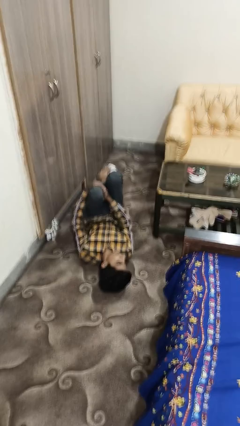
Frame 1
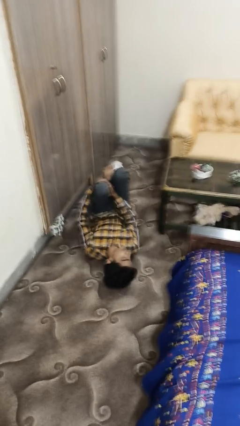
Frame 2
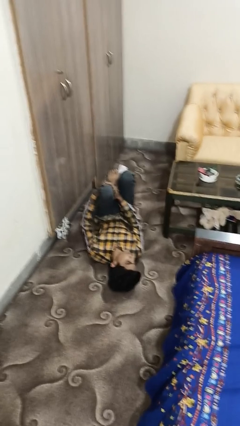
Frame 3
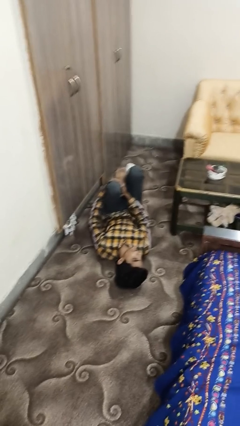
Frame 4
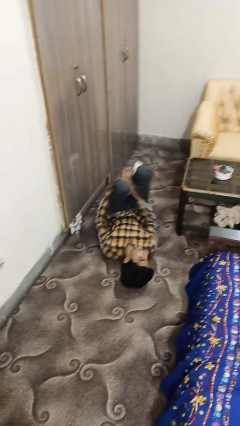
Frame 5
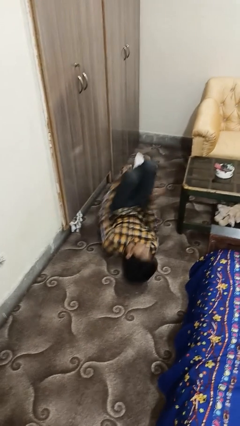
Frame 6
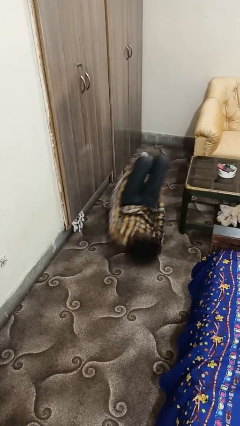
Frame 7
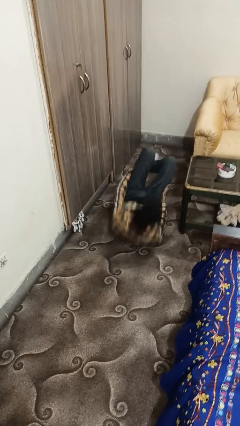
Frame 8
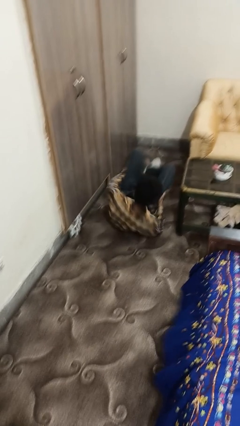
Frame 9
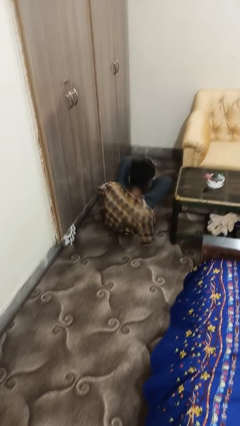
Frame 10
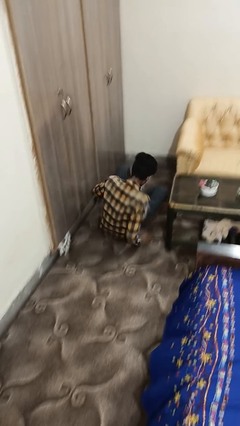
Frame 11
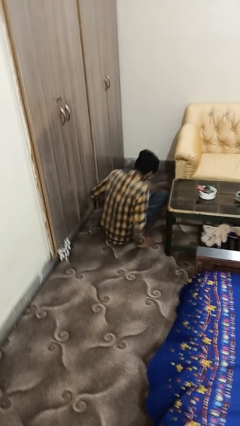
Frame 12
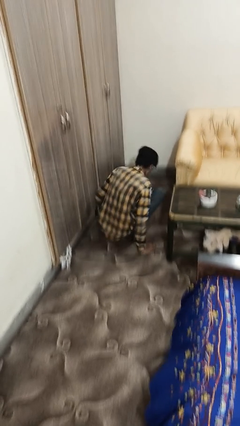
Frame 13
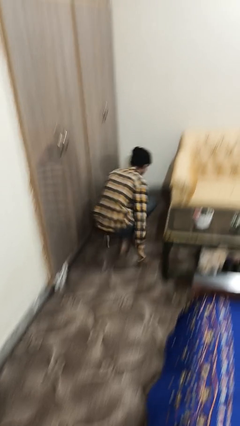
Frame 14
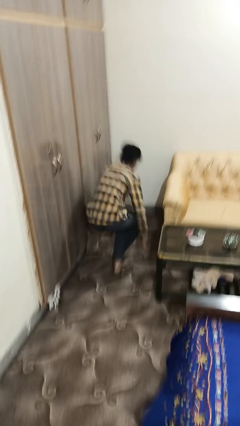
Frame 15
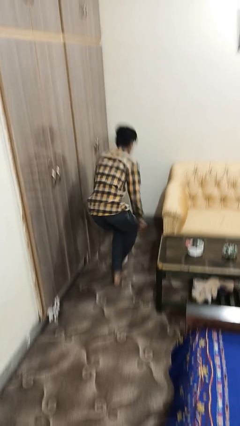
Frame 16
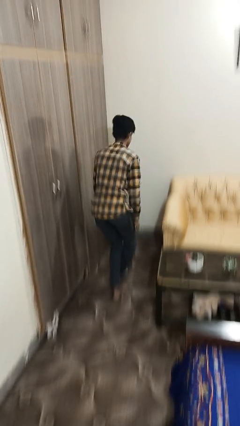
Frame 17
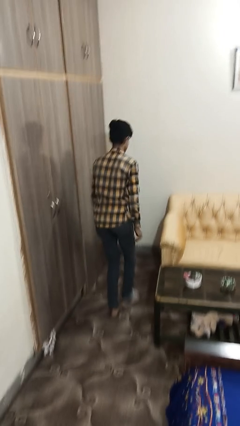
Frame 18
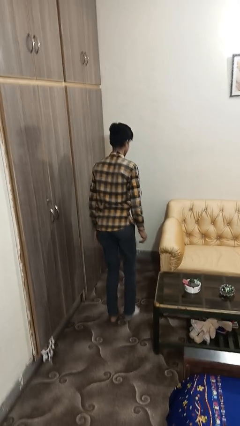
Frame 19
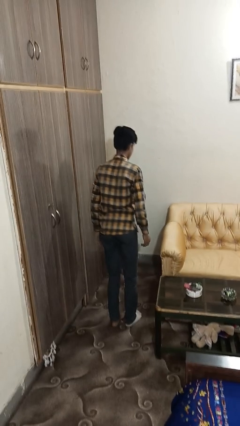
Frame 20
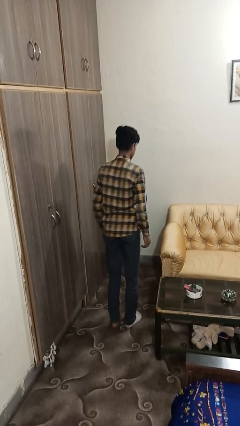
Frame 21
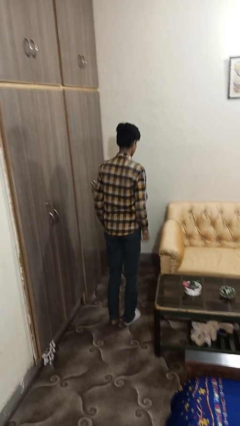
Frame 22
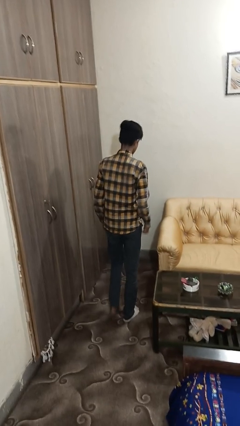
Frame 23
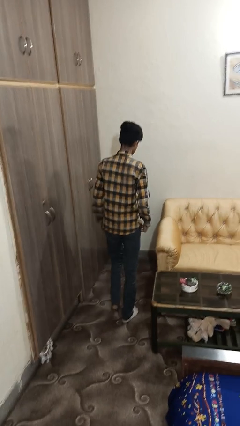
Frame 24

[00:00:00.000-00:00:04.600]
person stands up from floor

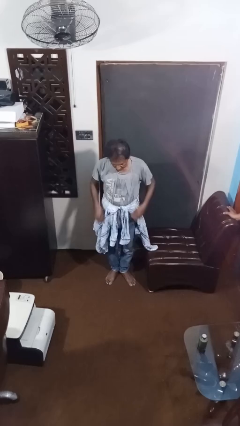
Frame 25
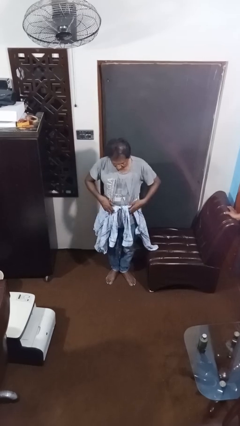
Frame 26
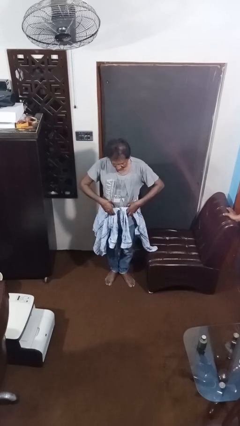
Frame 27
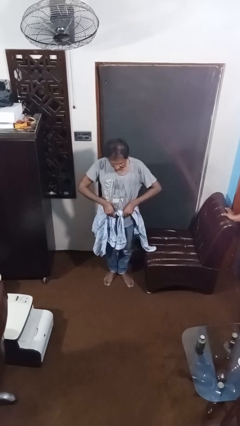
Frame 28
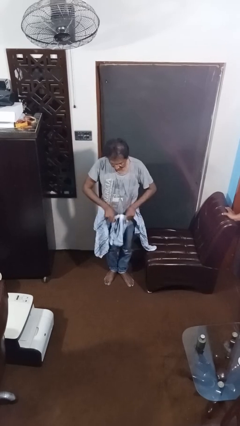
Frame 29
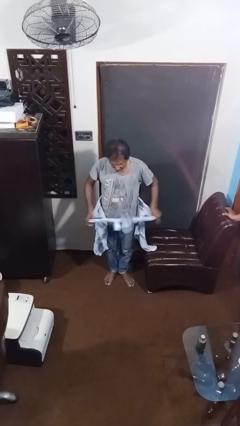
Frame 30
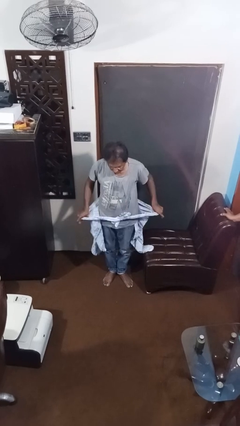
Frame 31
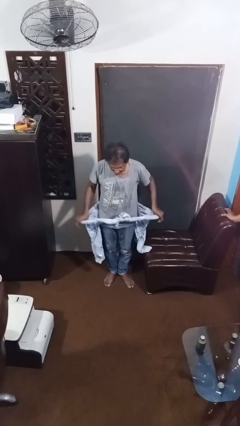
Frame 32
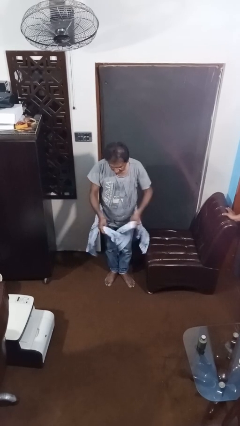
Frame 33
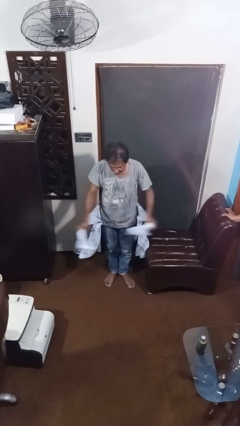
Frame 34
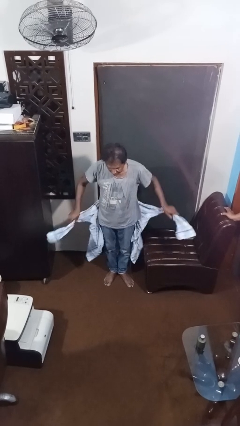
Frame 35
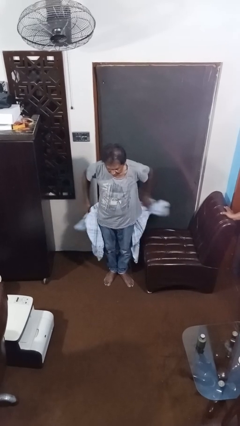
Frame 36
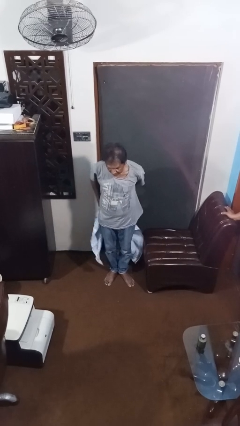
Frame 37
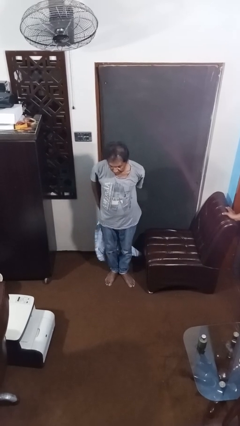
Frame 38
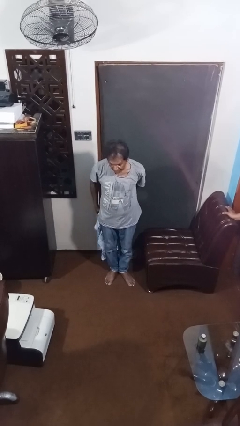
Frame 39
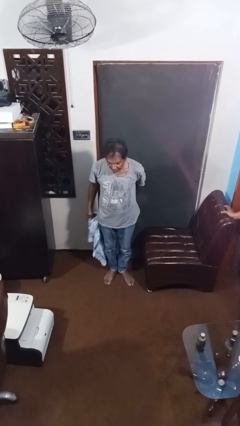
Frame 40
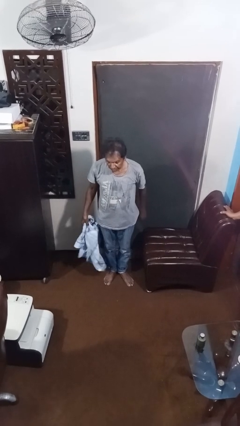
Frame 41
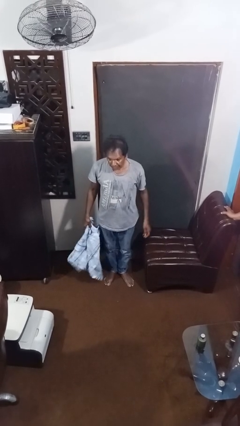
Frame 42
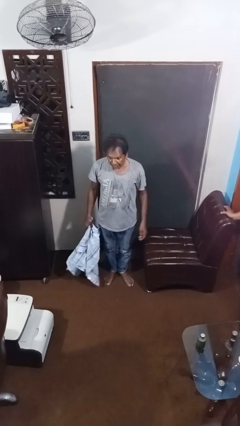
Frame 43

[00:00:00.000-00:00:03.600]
person unties jacket around waist

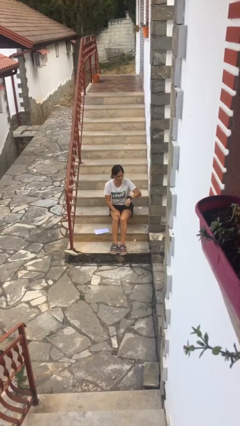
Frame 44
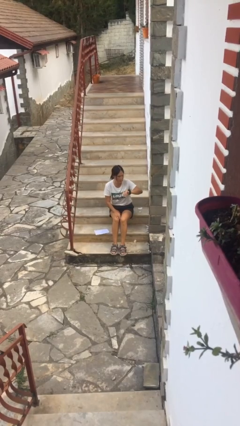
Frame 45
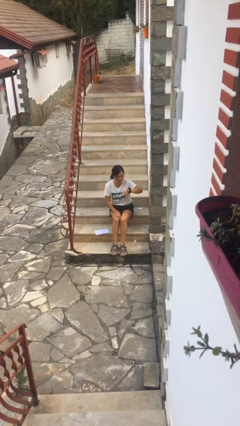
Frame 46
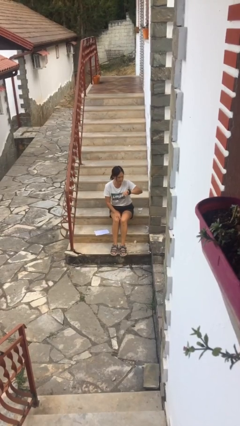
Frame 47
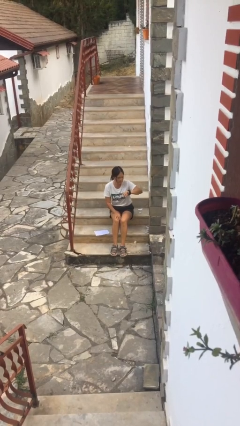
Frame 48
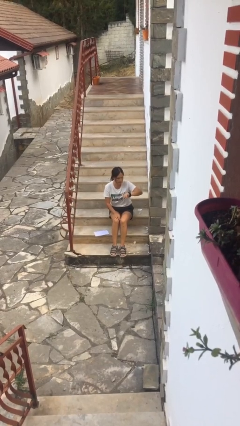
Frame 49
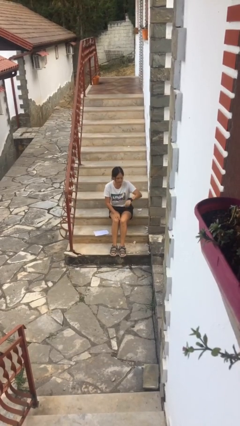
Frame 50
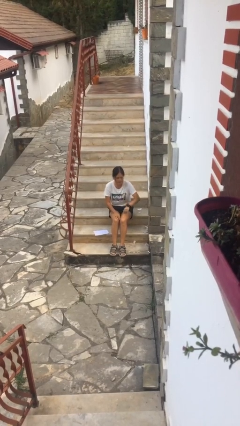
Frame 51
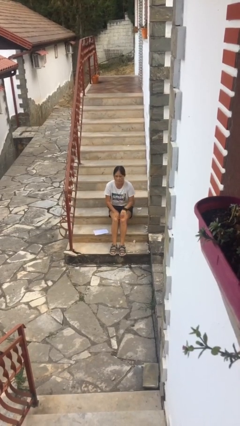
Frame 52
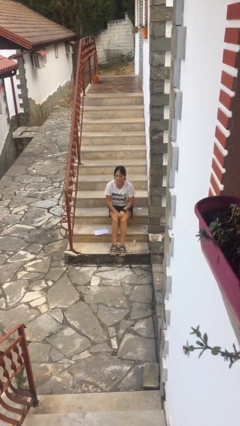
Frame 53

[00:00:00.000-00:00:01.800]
person looks at wristwatch

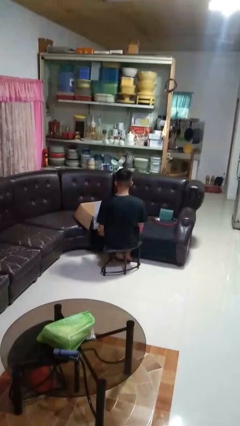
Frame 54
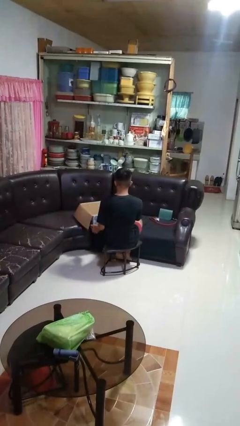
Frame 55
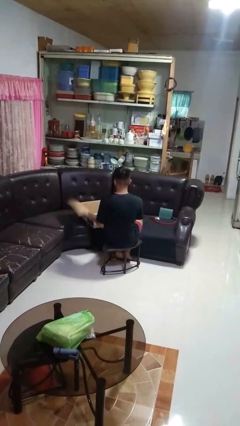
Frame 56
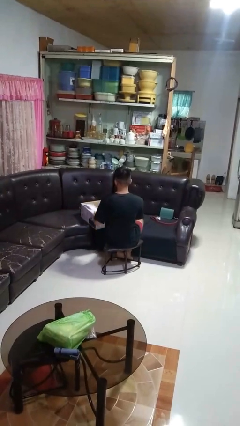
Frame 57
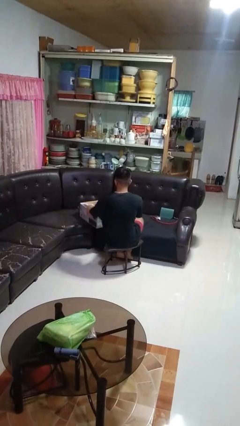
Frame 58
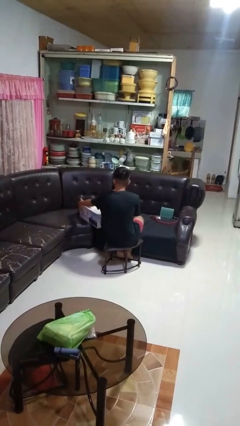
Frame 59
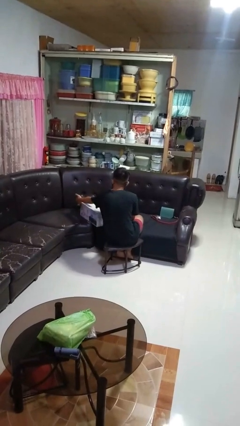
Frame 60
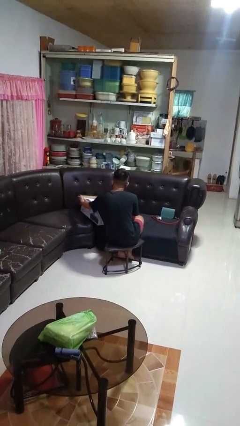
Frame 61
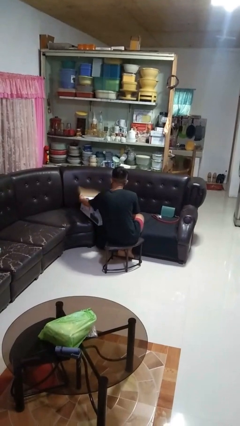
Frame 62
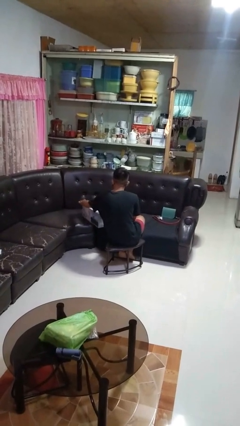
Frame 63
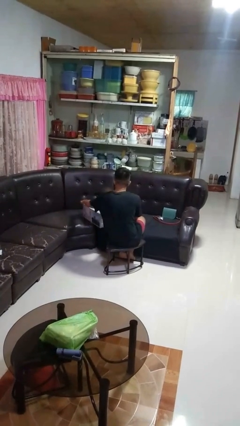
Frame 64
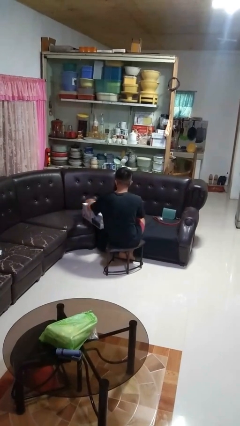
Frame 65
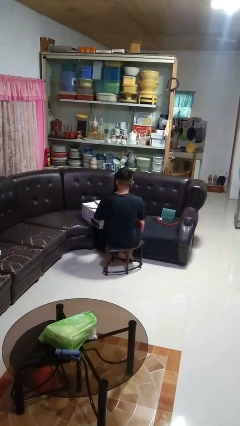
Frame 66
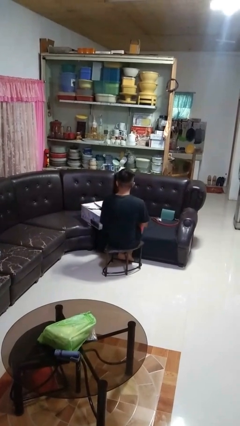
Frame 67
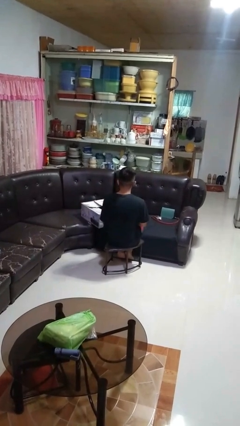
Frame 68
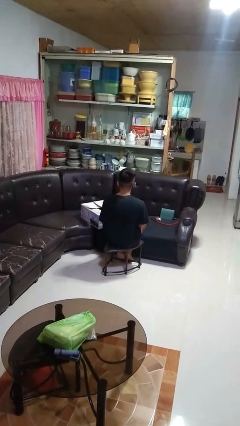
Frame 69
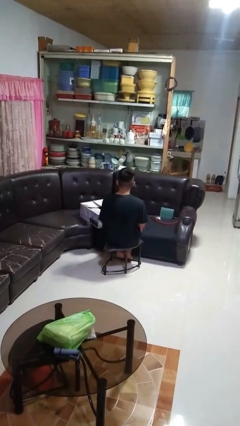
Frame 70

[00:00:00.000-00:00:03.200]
person closes box

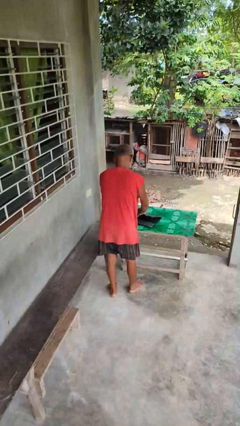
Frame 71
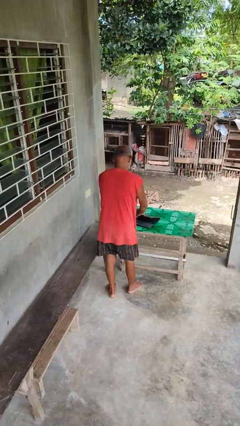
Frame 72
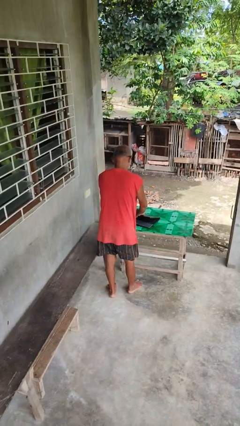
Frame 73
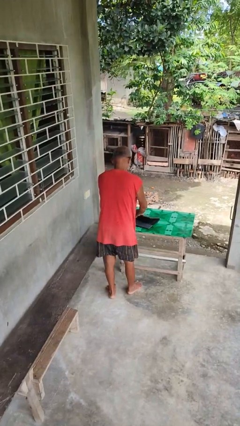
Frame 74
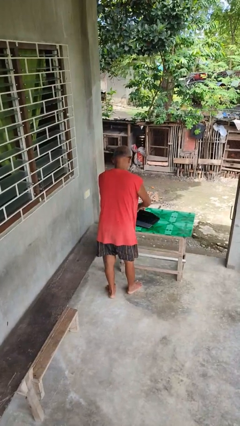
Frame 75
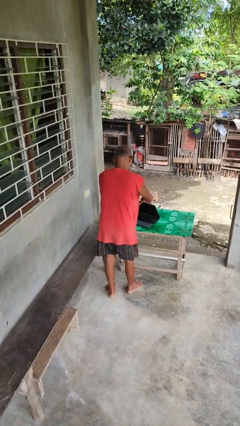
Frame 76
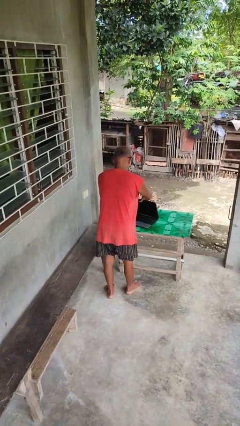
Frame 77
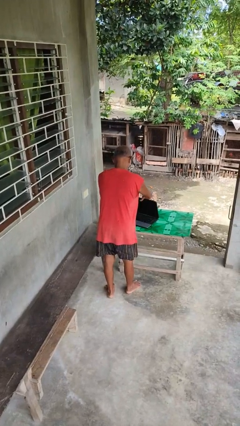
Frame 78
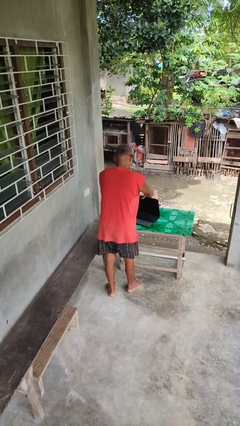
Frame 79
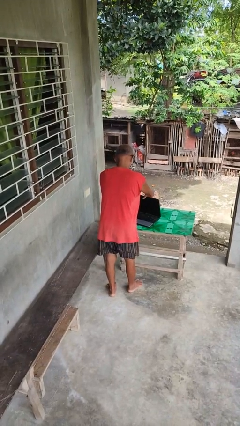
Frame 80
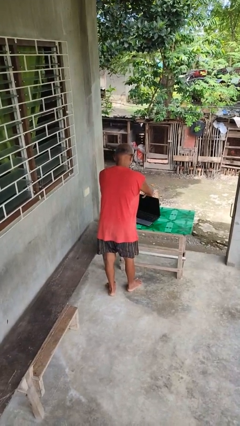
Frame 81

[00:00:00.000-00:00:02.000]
person opens laptop

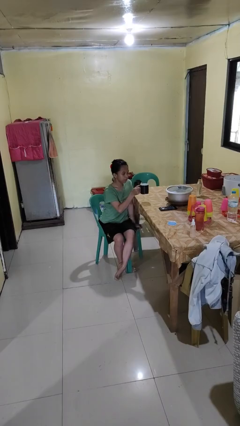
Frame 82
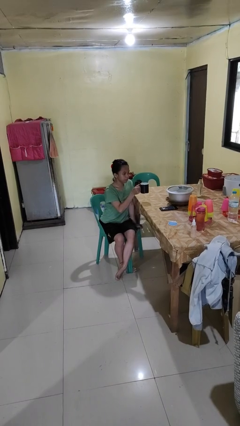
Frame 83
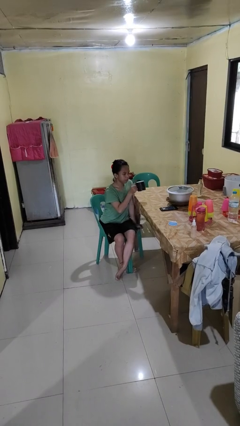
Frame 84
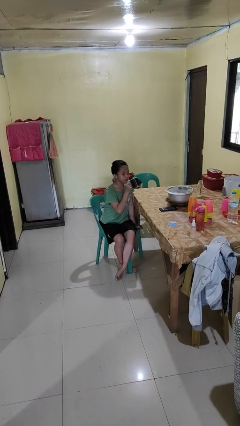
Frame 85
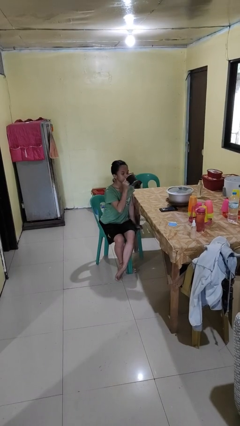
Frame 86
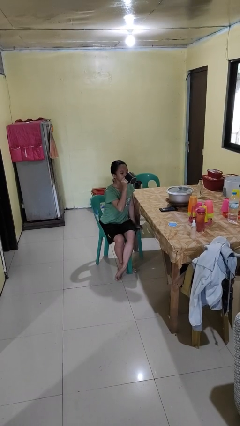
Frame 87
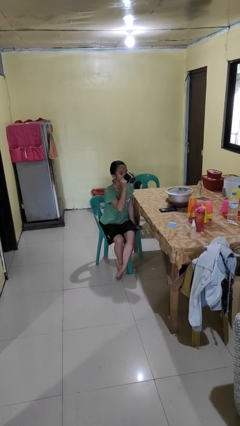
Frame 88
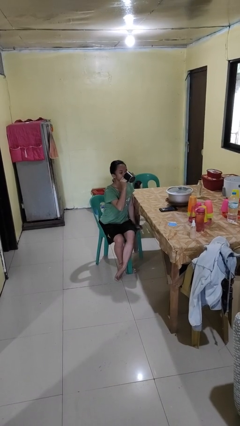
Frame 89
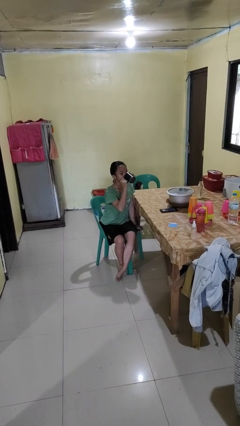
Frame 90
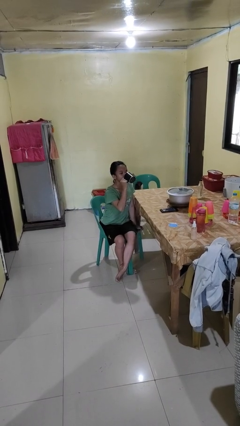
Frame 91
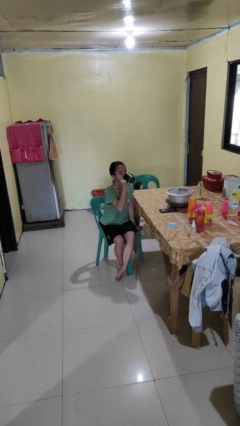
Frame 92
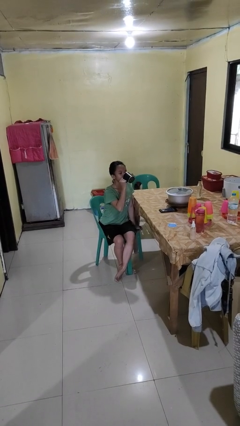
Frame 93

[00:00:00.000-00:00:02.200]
person drinks from mug

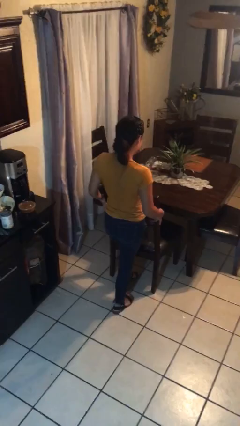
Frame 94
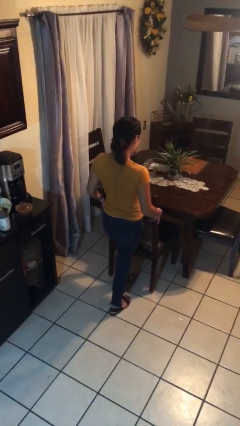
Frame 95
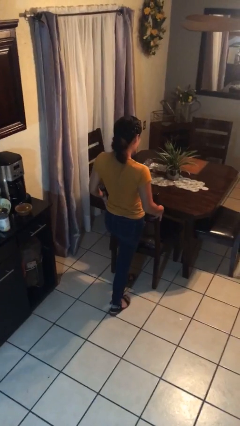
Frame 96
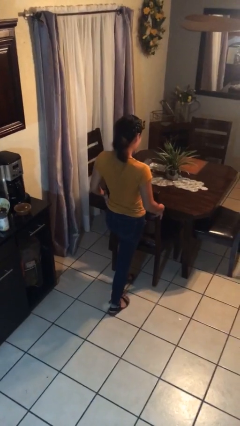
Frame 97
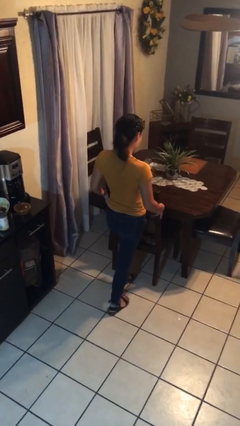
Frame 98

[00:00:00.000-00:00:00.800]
person pushes in chair
